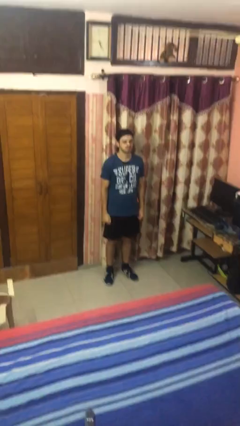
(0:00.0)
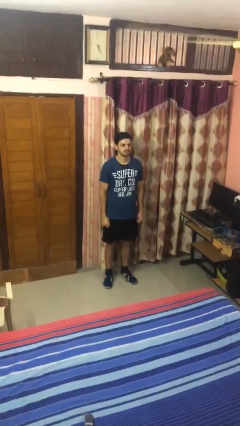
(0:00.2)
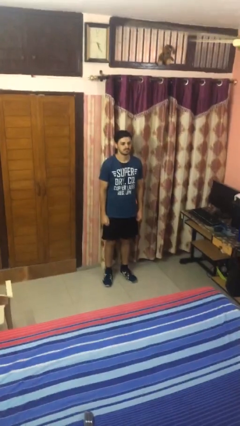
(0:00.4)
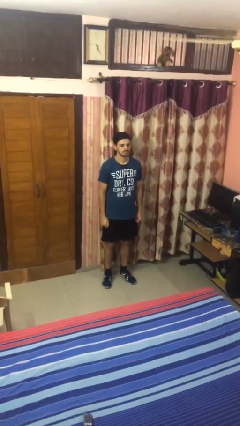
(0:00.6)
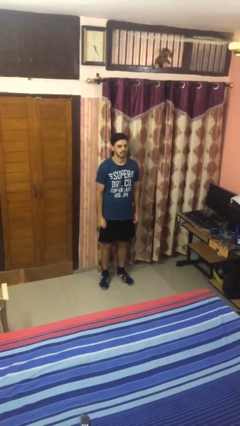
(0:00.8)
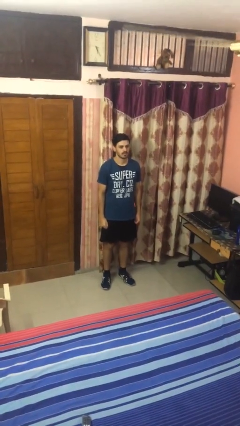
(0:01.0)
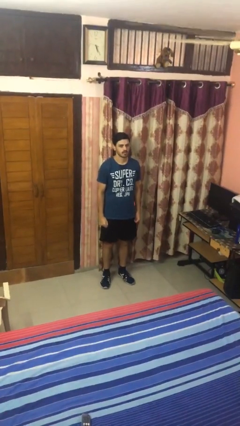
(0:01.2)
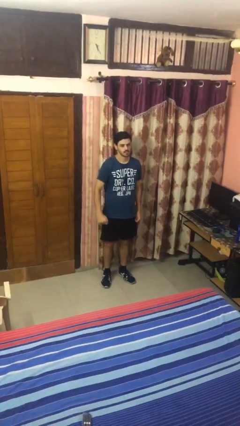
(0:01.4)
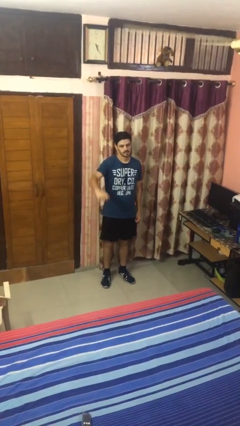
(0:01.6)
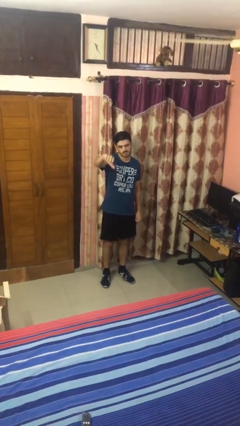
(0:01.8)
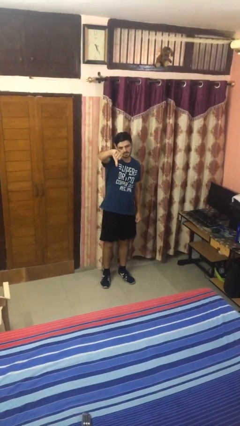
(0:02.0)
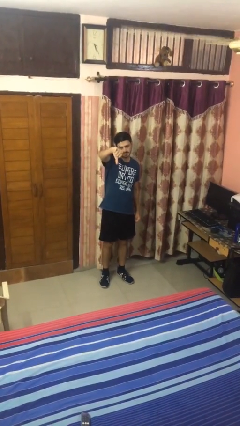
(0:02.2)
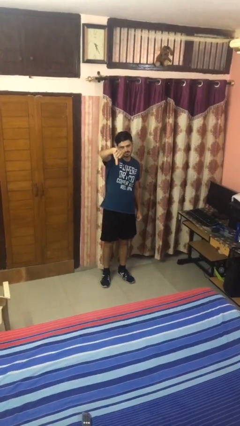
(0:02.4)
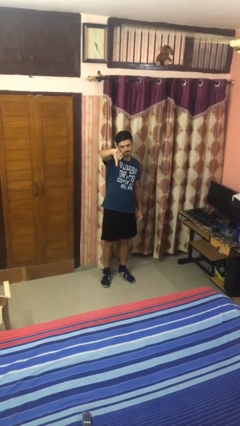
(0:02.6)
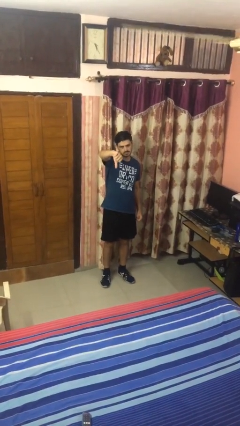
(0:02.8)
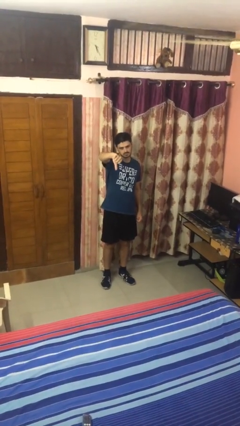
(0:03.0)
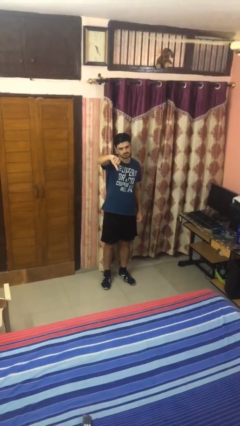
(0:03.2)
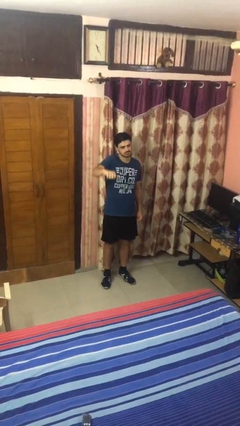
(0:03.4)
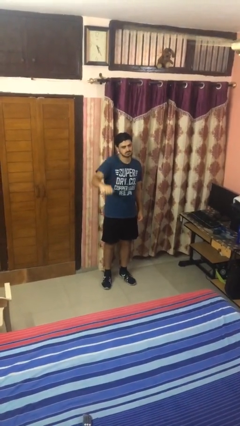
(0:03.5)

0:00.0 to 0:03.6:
person gestures thumbs down

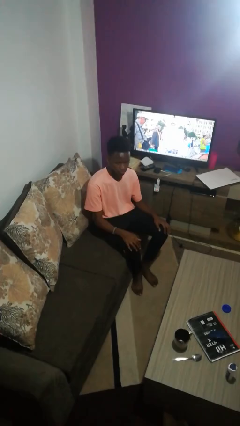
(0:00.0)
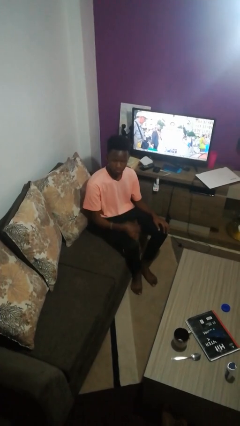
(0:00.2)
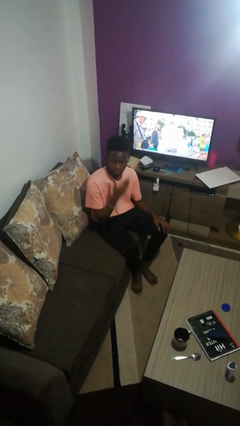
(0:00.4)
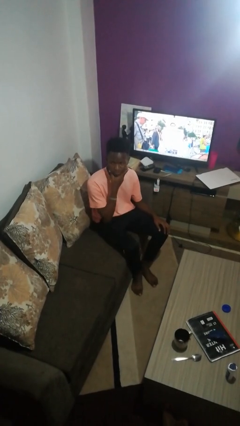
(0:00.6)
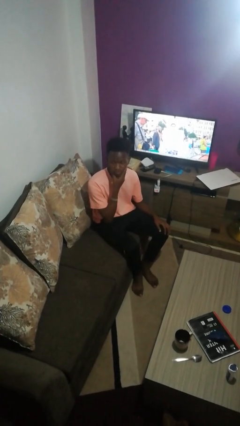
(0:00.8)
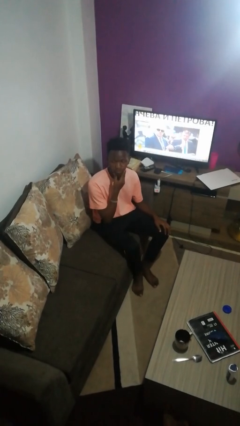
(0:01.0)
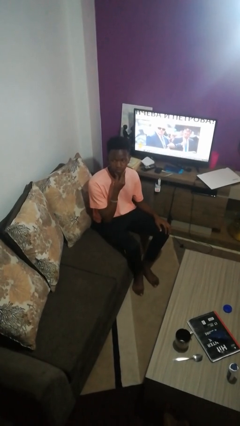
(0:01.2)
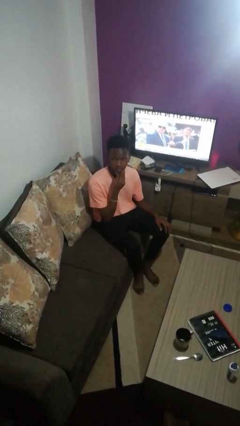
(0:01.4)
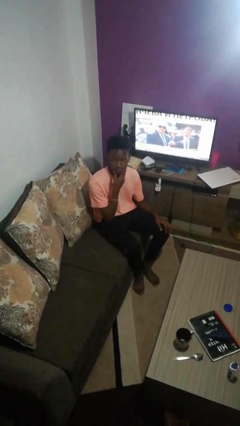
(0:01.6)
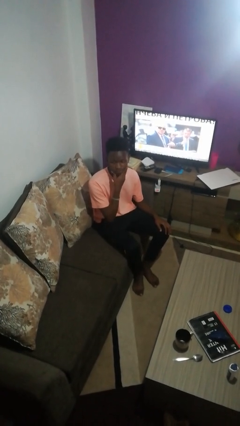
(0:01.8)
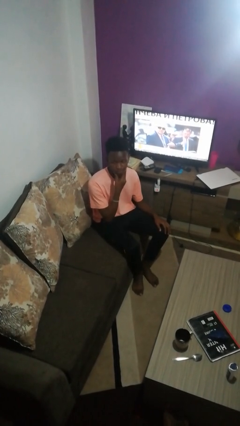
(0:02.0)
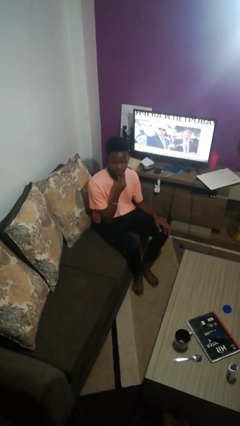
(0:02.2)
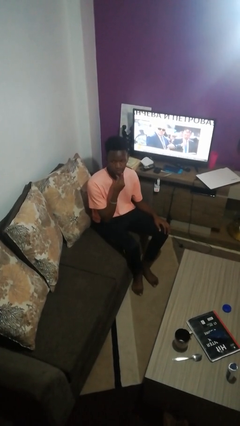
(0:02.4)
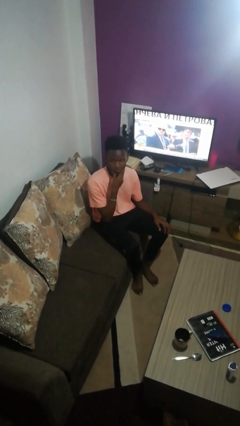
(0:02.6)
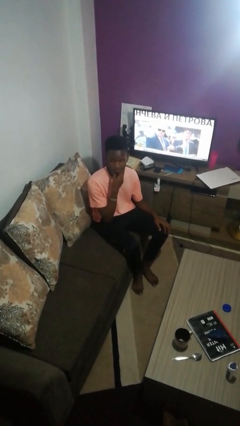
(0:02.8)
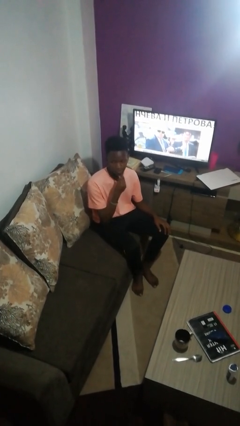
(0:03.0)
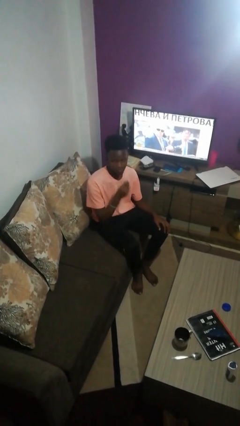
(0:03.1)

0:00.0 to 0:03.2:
person strokes chin

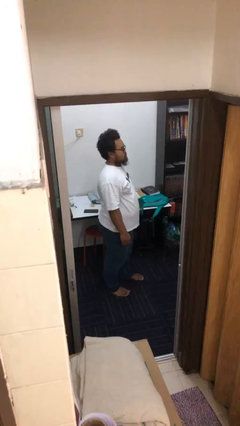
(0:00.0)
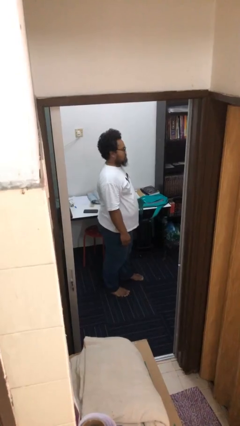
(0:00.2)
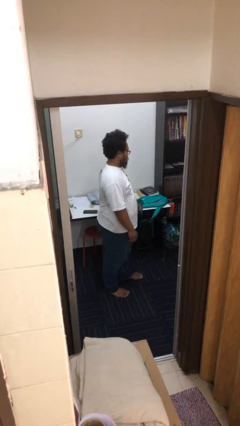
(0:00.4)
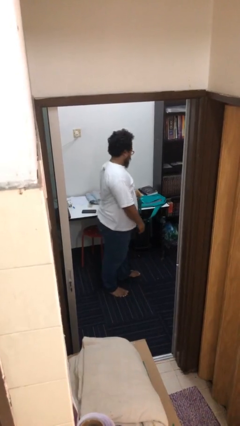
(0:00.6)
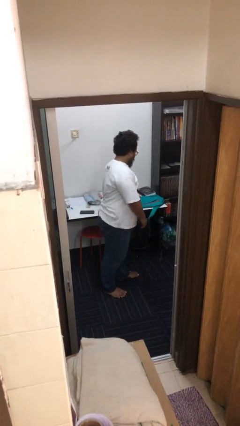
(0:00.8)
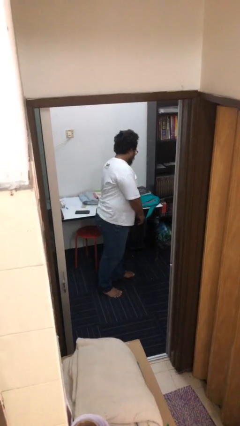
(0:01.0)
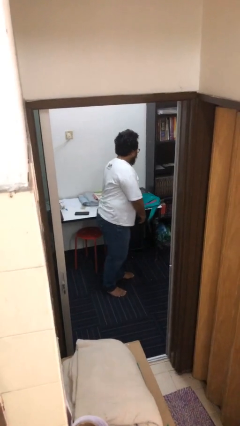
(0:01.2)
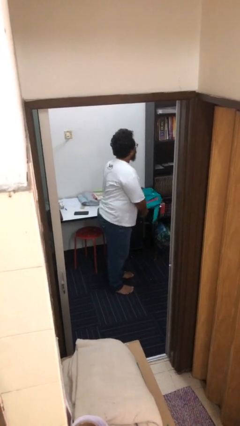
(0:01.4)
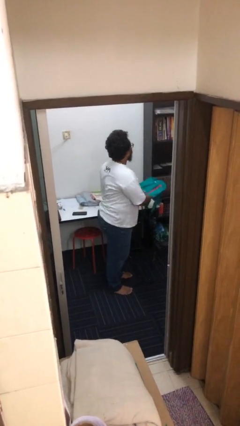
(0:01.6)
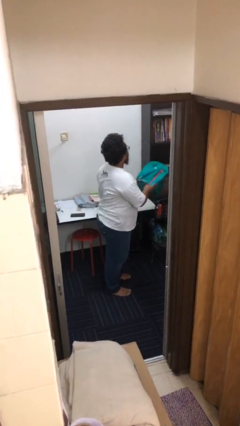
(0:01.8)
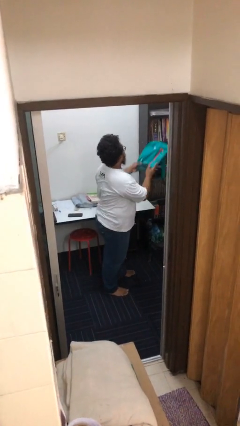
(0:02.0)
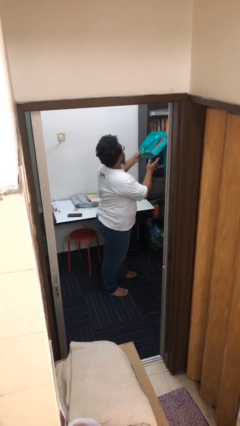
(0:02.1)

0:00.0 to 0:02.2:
person picks up object from table

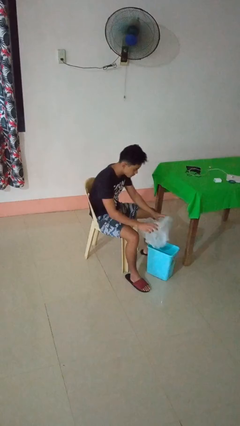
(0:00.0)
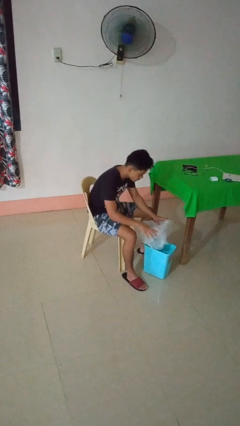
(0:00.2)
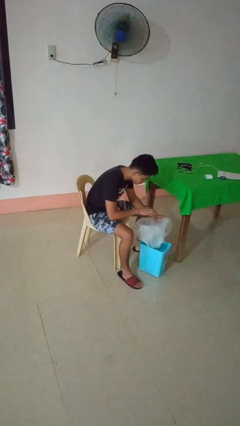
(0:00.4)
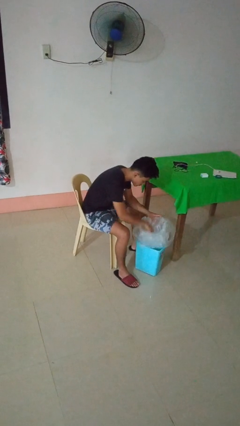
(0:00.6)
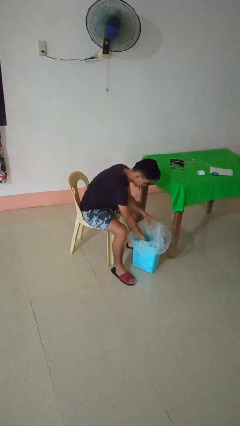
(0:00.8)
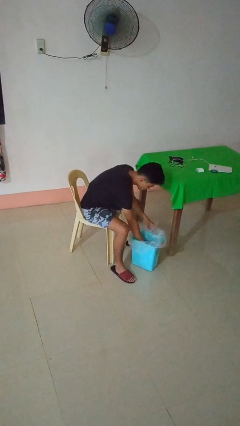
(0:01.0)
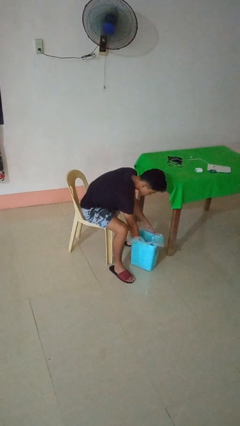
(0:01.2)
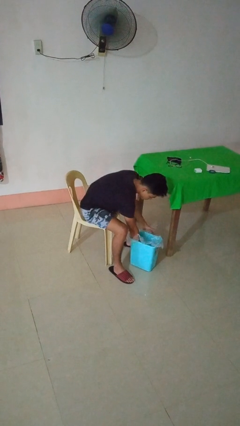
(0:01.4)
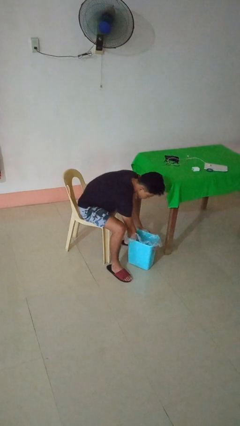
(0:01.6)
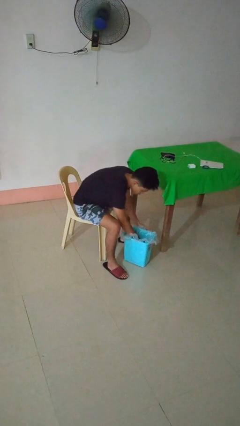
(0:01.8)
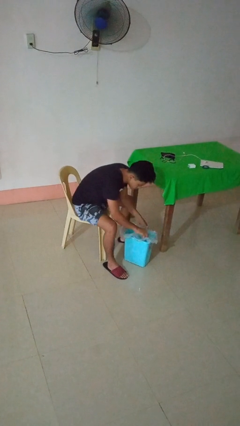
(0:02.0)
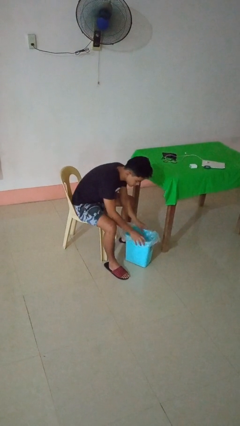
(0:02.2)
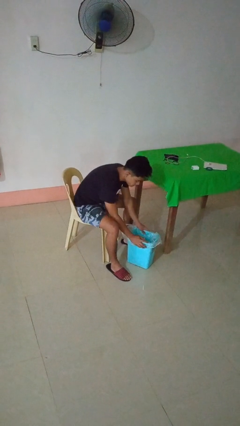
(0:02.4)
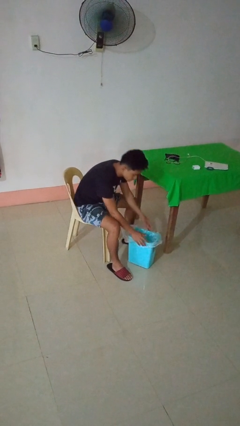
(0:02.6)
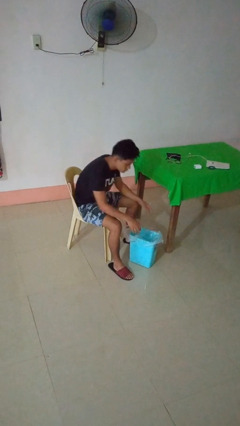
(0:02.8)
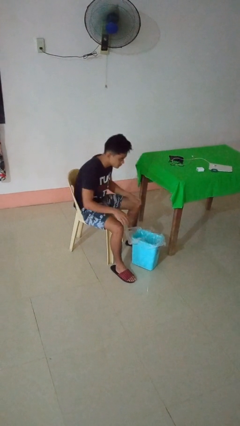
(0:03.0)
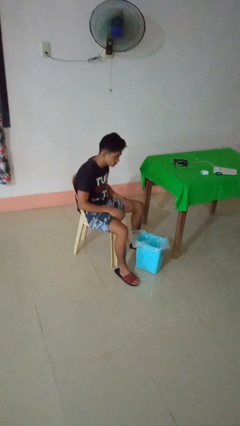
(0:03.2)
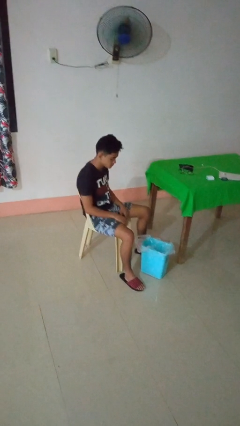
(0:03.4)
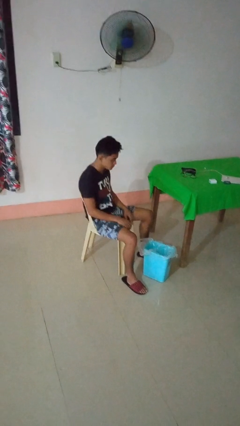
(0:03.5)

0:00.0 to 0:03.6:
person inserts trashbag into trashcan

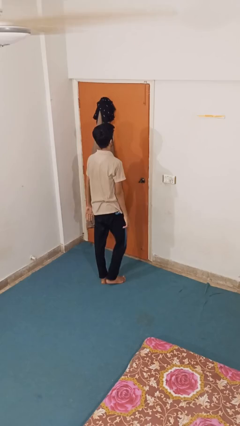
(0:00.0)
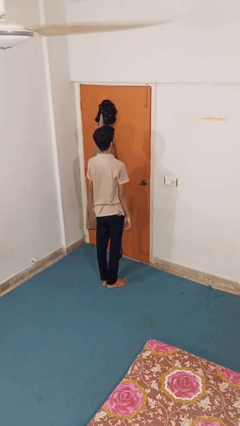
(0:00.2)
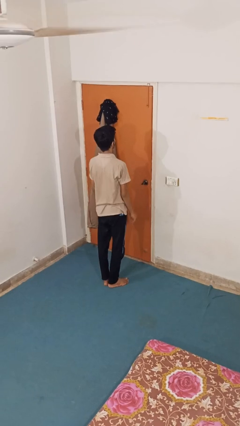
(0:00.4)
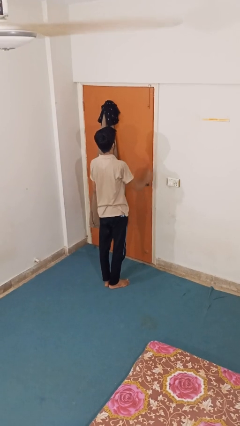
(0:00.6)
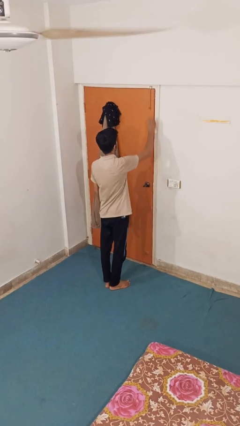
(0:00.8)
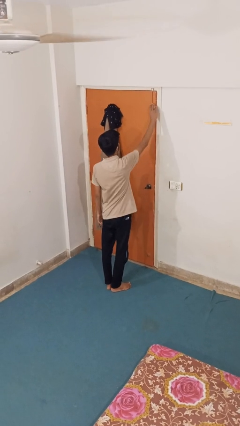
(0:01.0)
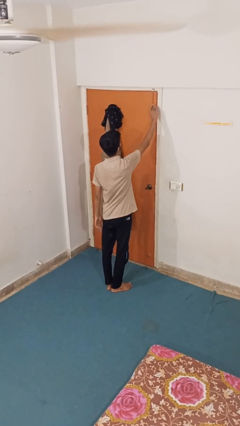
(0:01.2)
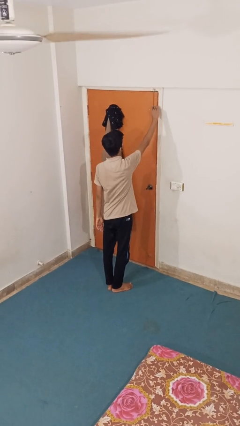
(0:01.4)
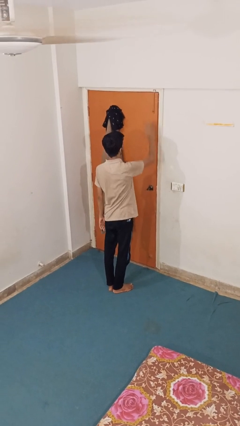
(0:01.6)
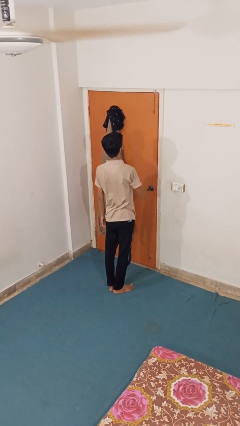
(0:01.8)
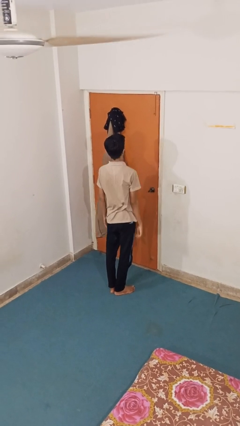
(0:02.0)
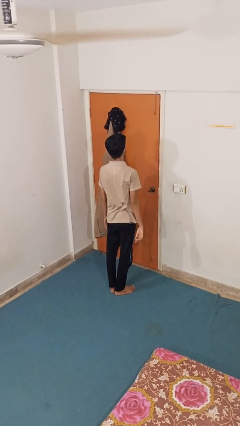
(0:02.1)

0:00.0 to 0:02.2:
person locks door with keys

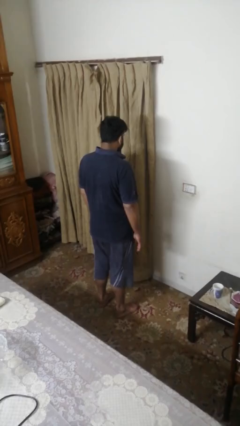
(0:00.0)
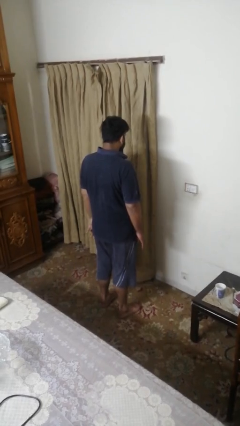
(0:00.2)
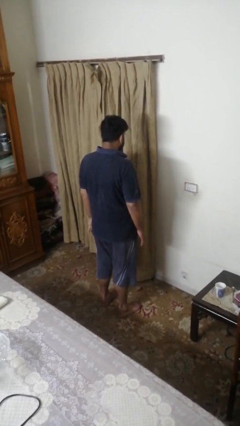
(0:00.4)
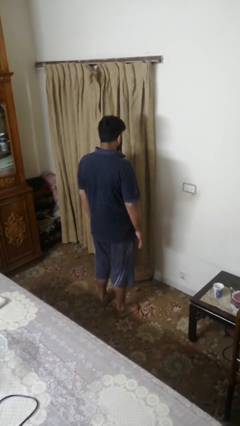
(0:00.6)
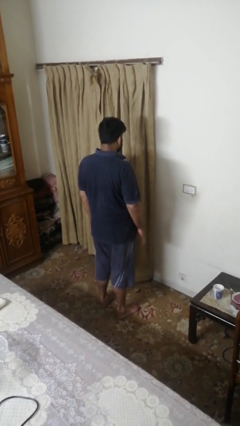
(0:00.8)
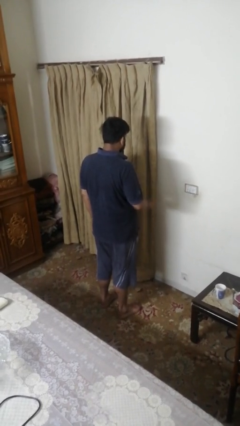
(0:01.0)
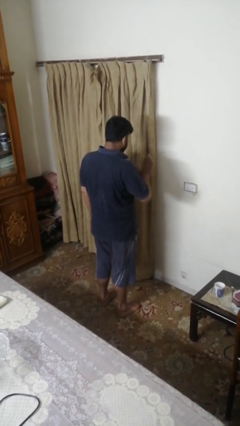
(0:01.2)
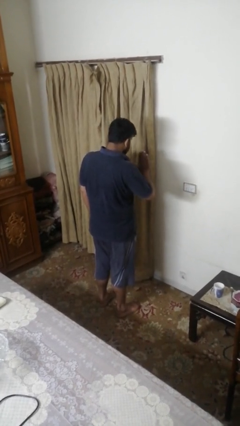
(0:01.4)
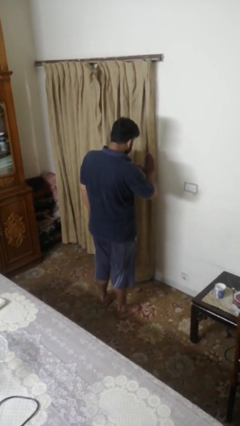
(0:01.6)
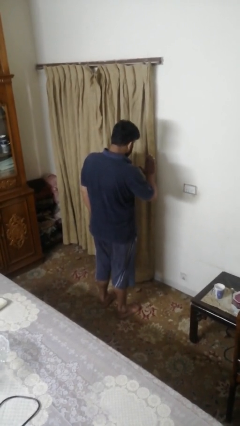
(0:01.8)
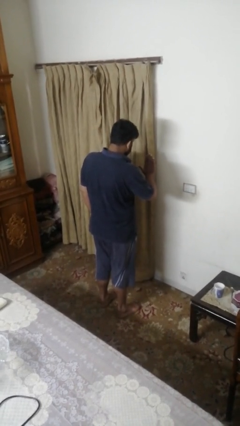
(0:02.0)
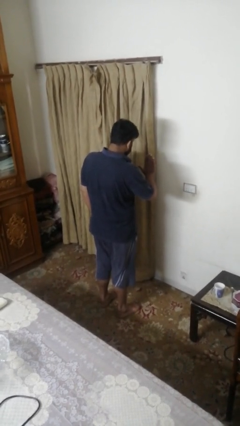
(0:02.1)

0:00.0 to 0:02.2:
person gestures stop

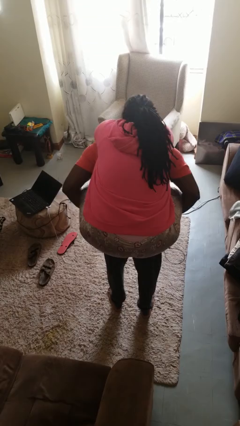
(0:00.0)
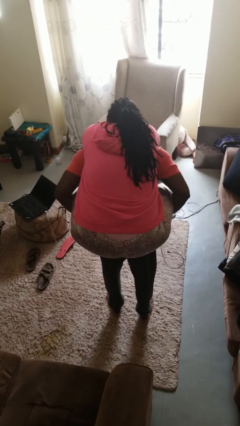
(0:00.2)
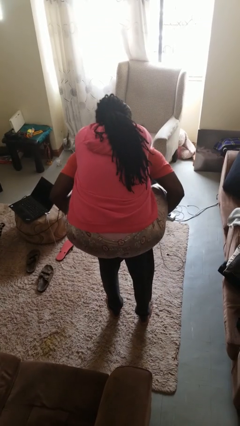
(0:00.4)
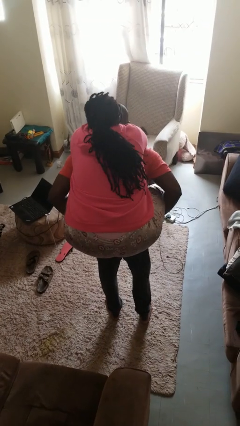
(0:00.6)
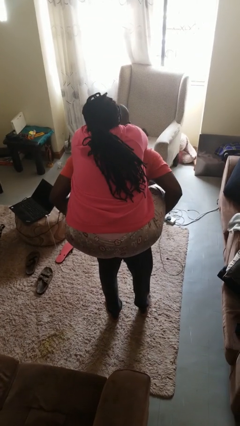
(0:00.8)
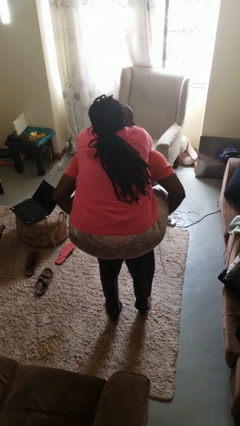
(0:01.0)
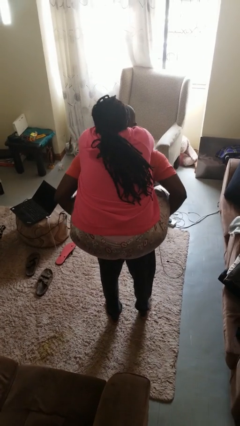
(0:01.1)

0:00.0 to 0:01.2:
person carries person on back
